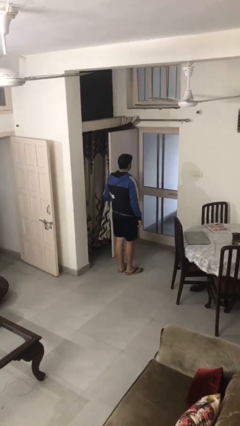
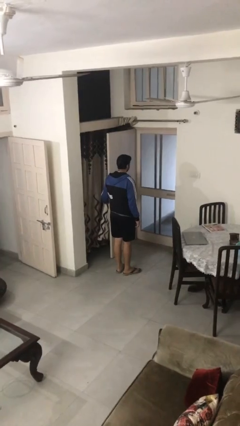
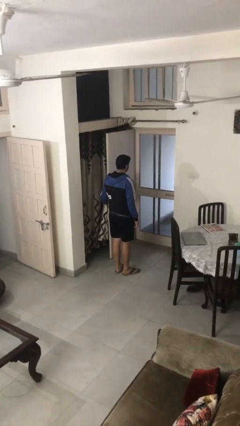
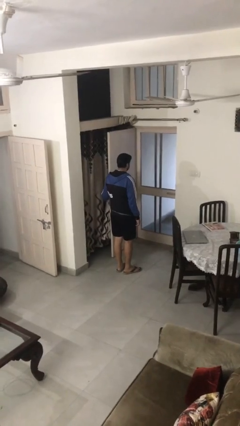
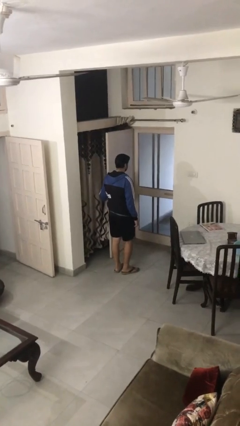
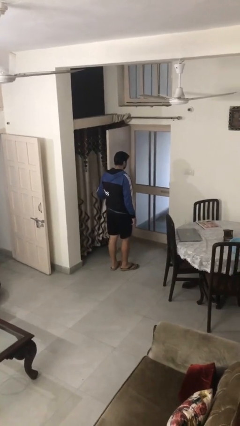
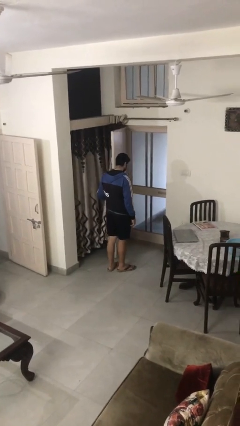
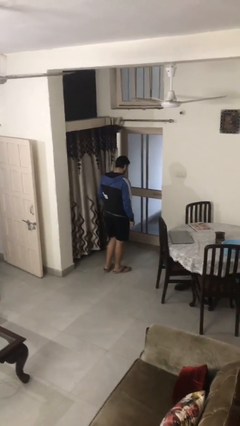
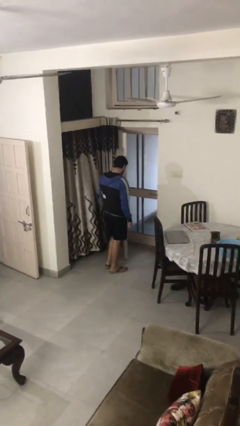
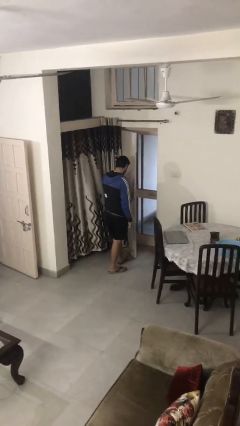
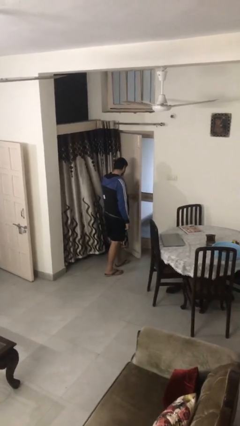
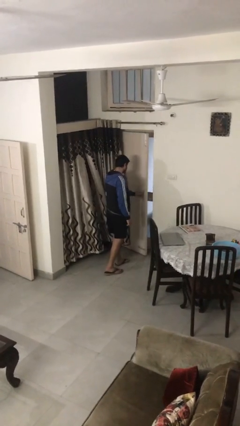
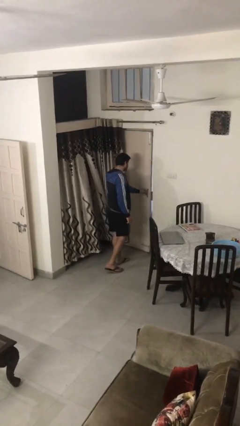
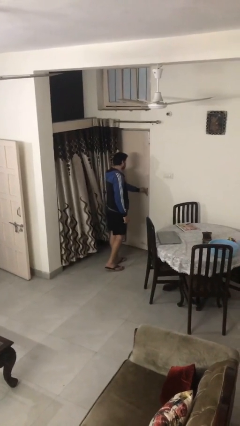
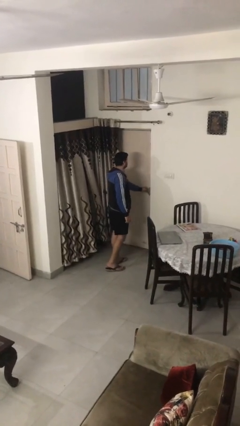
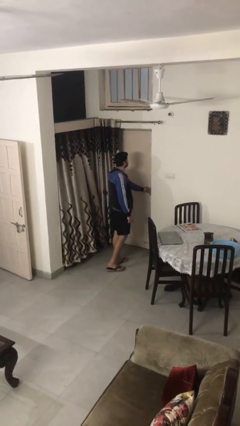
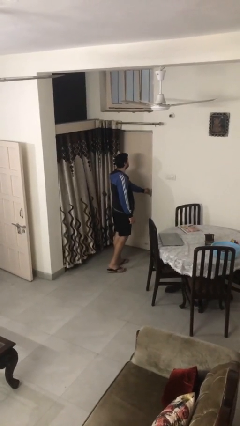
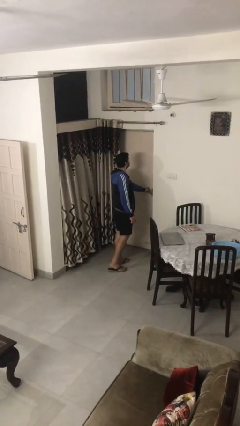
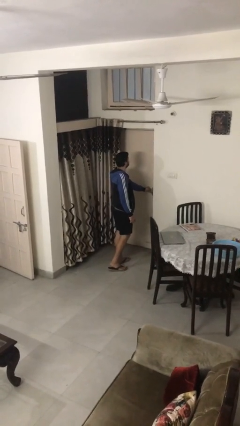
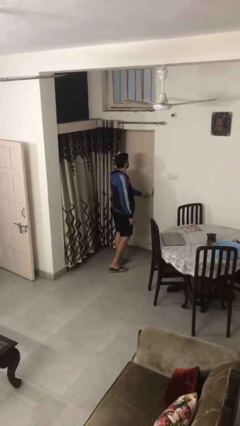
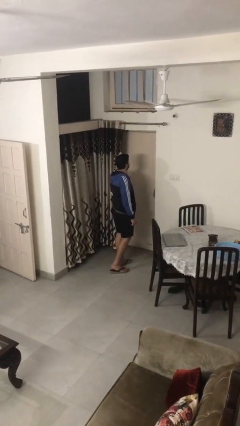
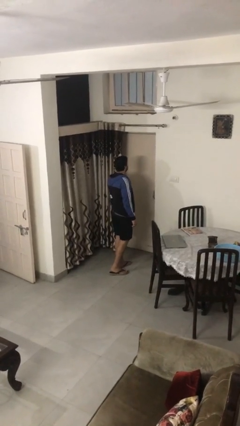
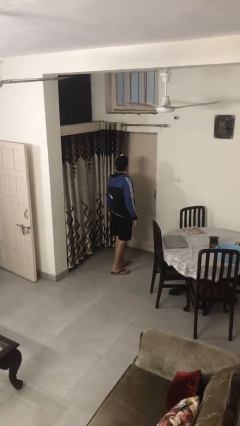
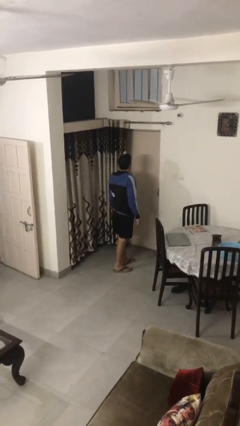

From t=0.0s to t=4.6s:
person closes facility door

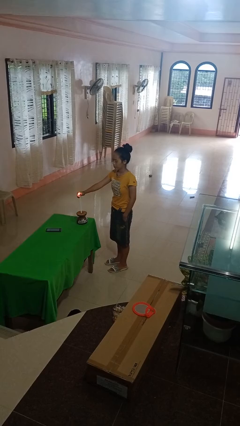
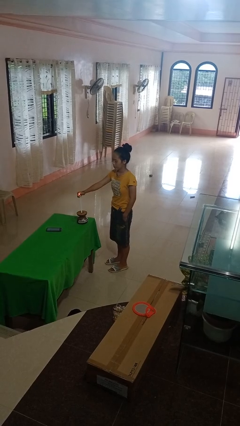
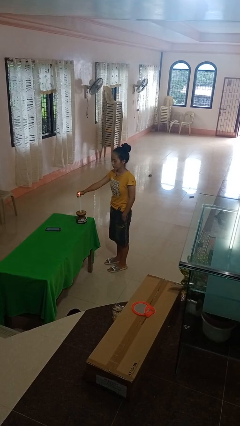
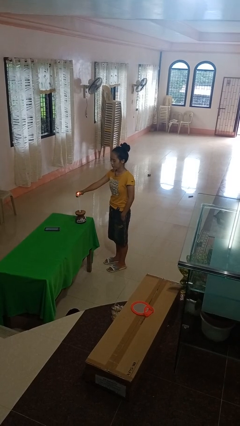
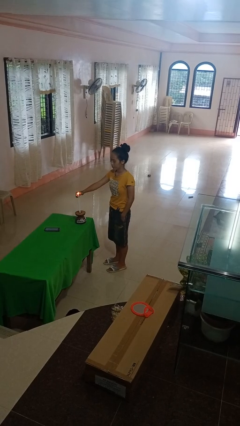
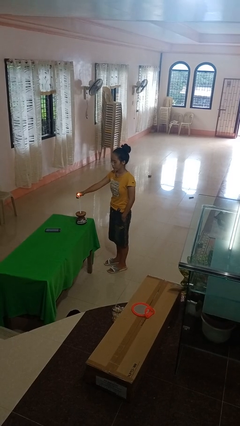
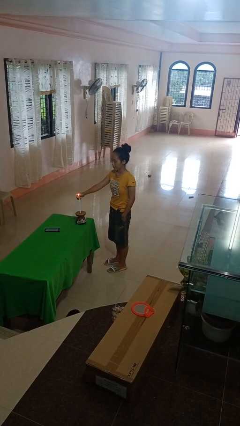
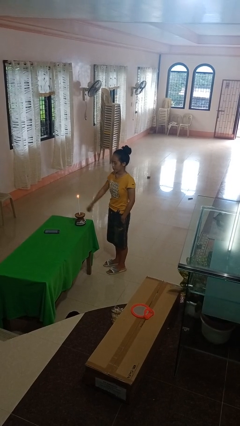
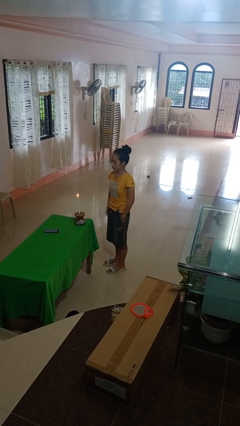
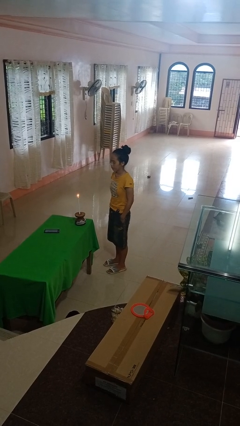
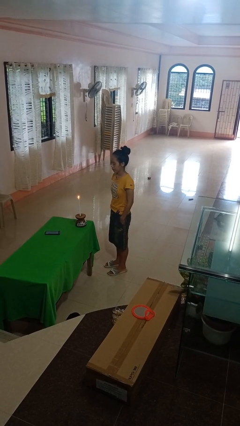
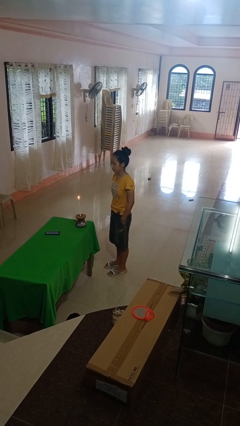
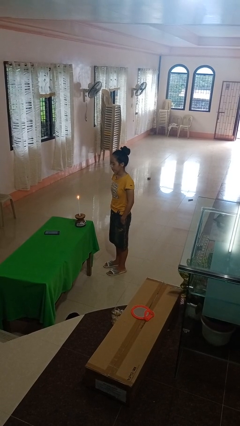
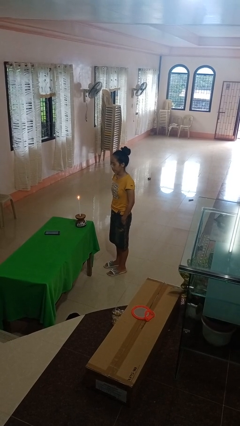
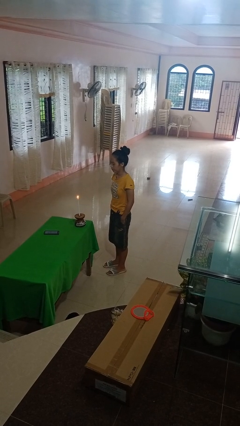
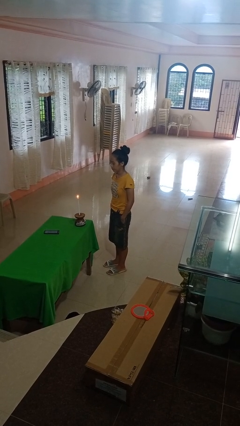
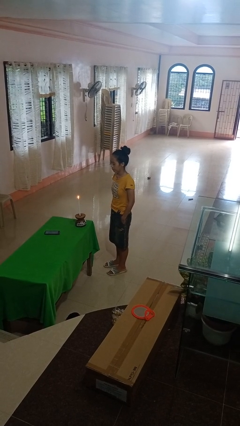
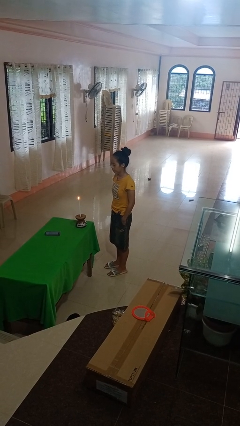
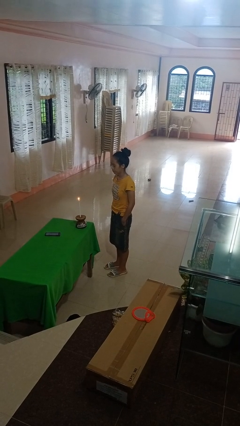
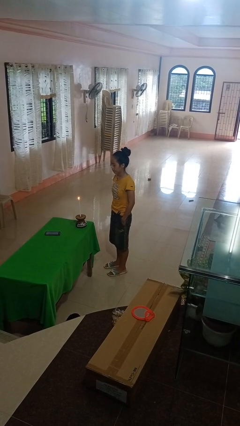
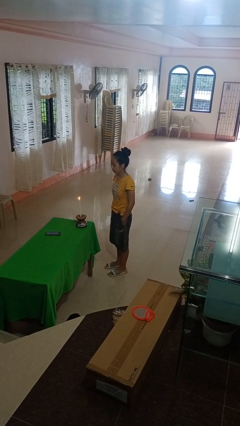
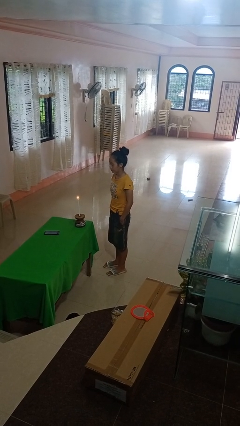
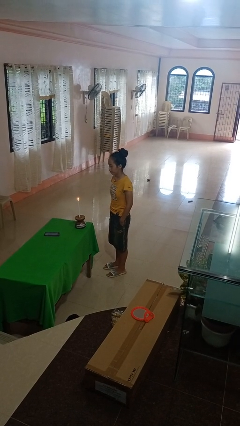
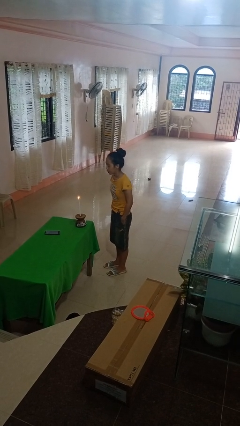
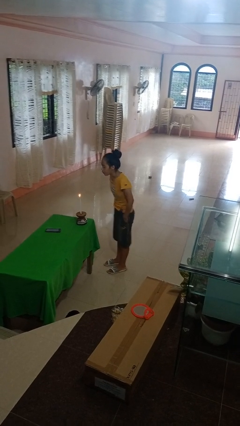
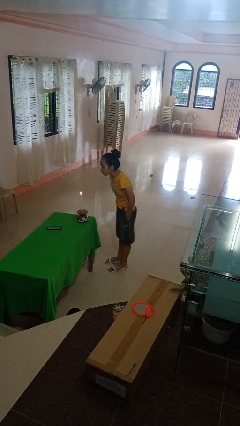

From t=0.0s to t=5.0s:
person lights candle

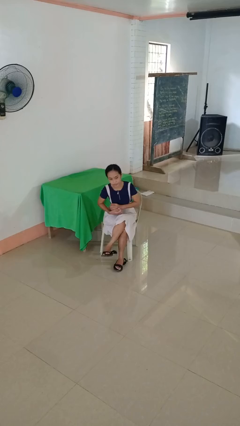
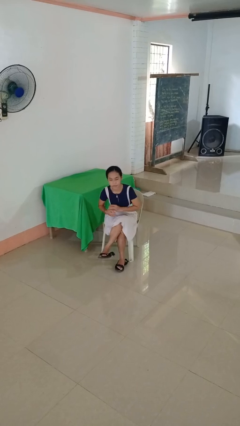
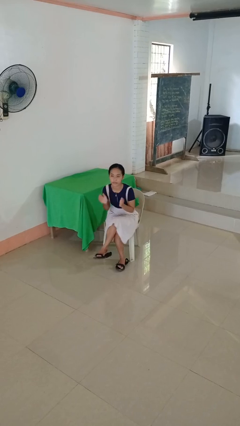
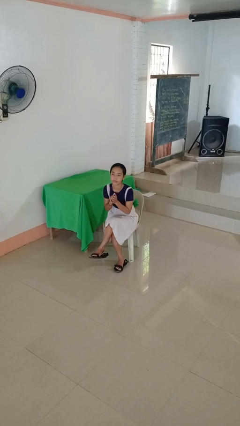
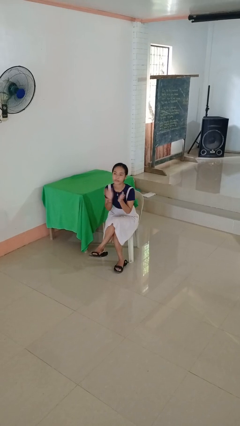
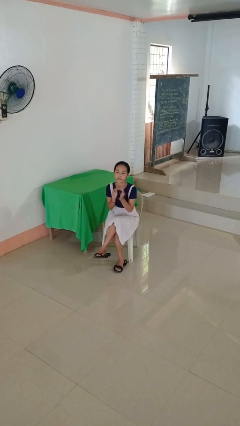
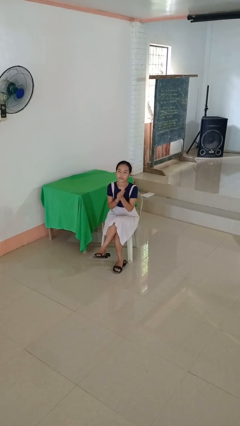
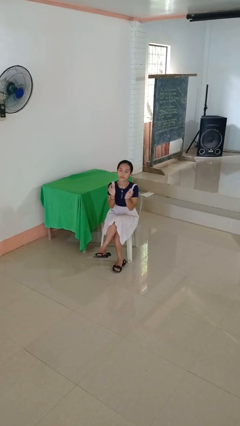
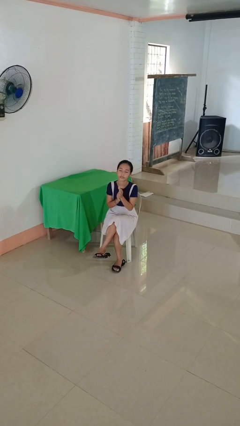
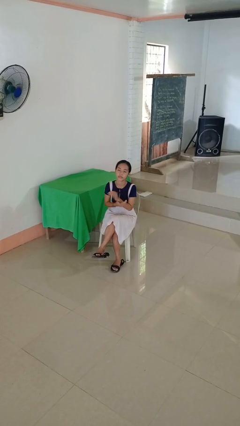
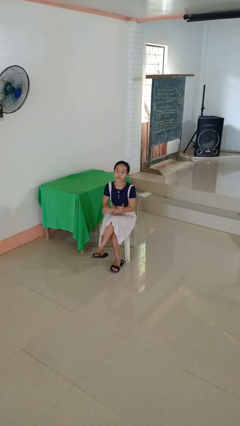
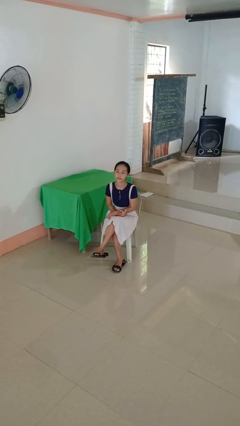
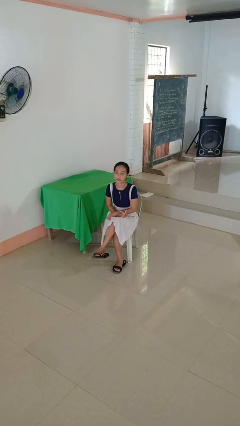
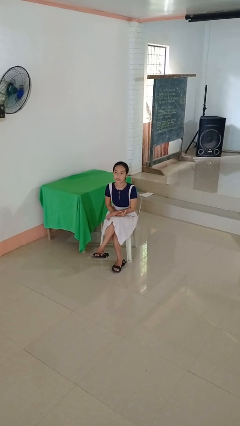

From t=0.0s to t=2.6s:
person claps hands

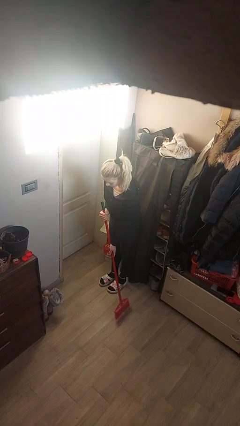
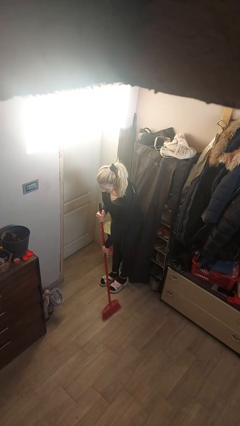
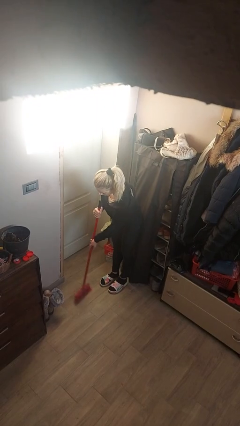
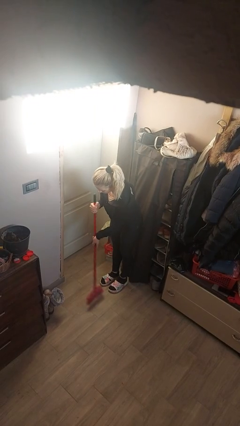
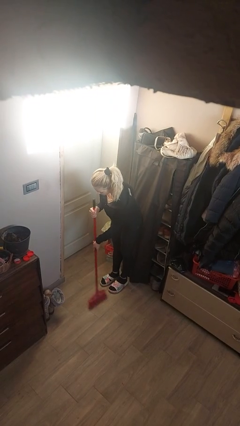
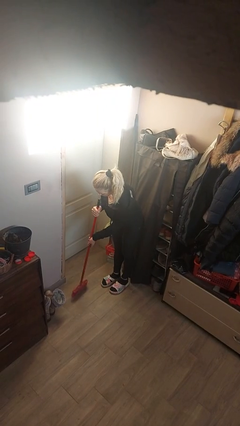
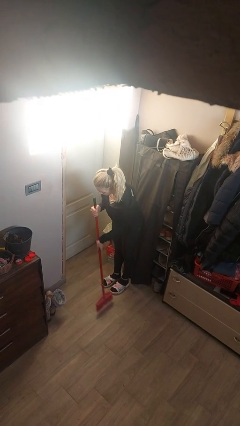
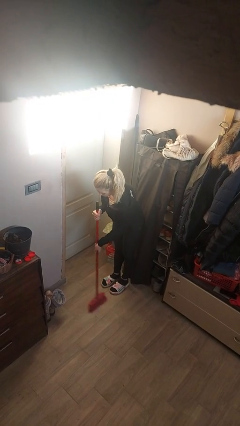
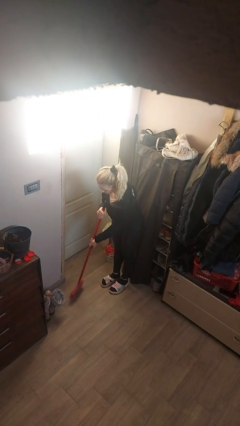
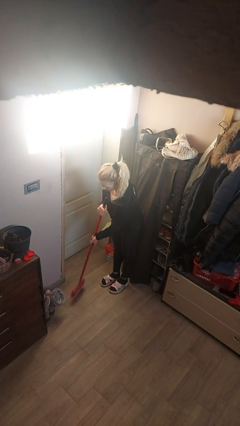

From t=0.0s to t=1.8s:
person sweeps floor

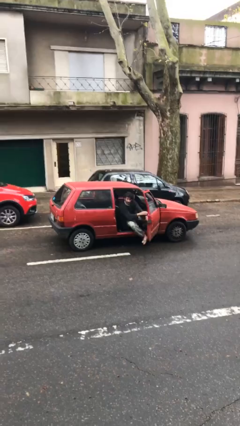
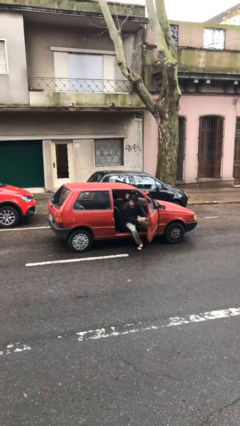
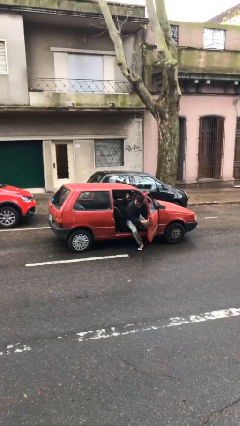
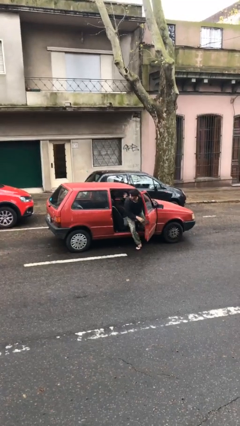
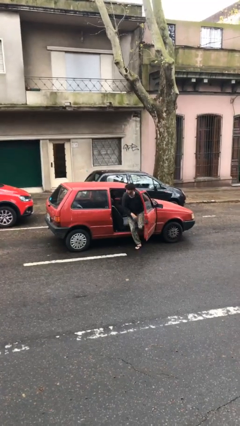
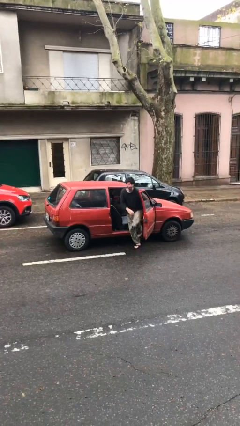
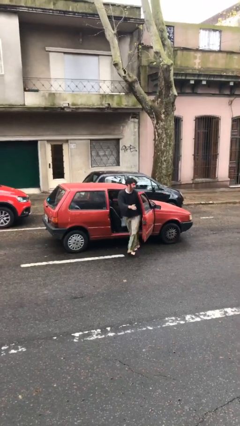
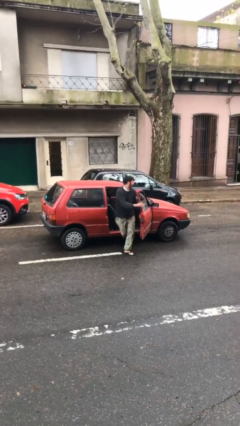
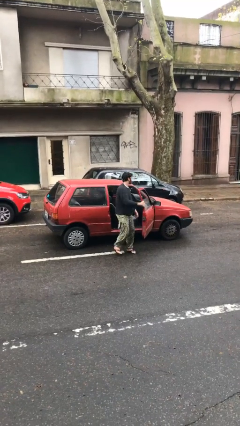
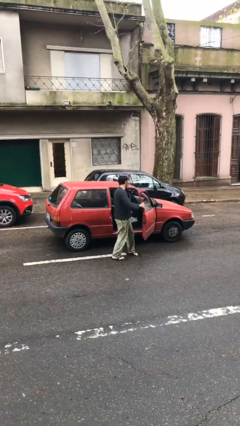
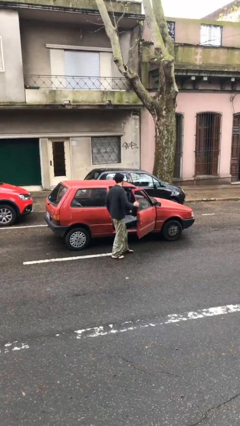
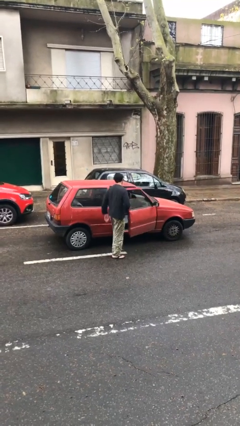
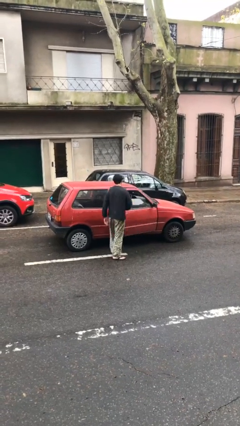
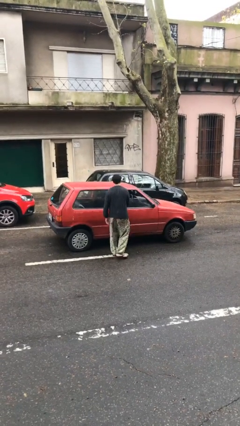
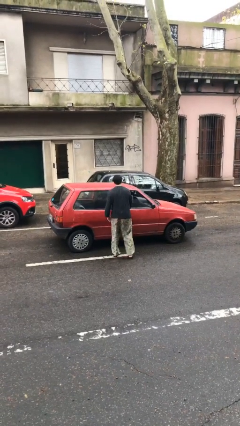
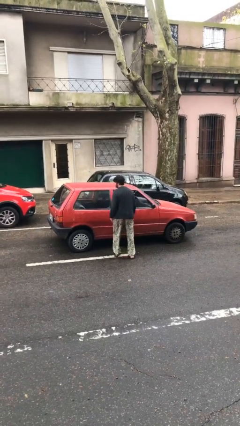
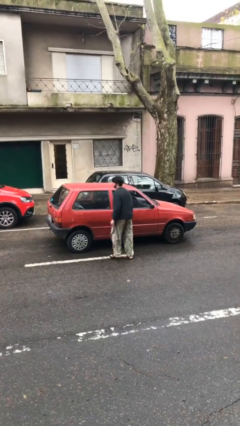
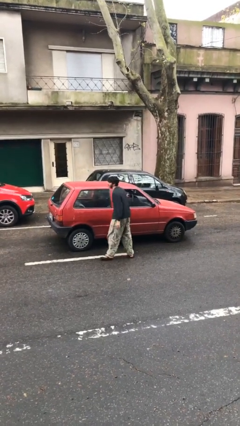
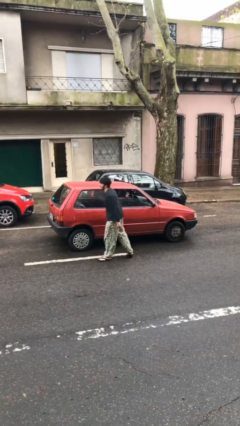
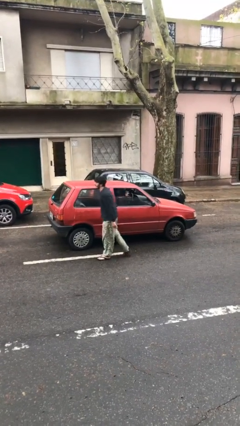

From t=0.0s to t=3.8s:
car drops off person
